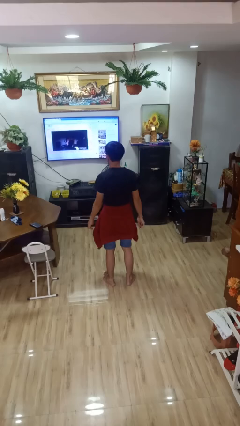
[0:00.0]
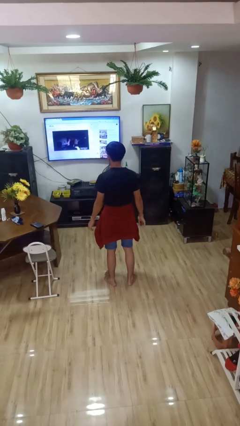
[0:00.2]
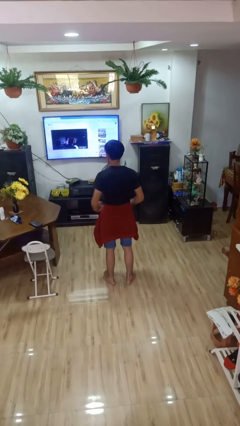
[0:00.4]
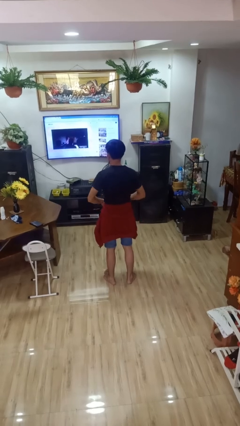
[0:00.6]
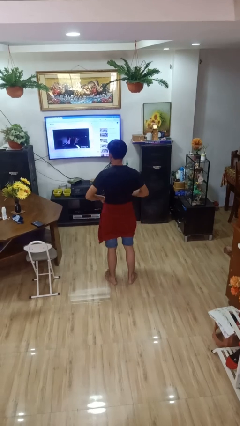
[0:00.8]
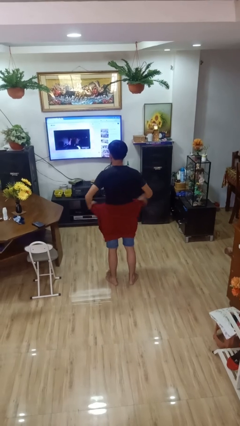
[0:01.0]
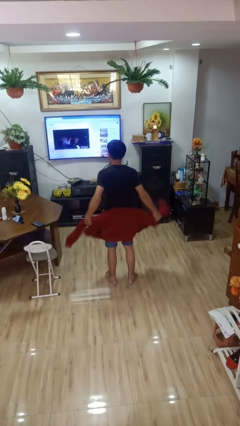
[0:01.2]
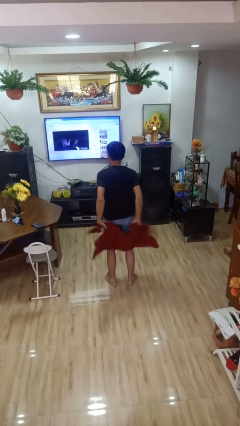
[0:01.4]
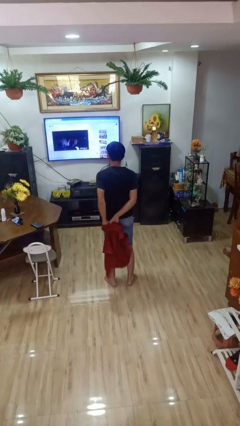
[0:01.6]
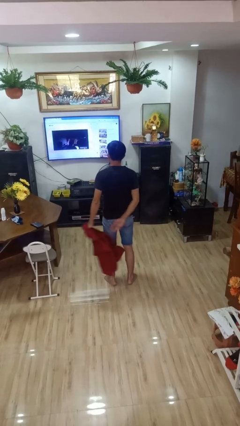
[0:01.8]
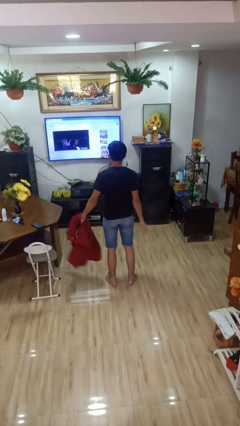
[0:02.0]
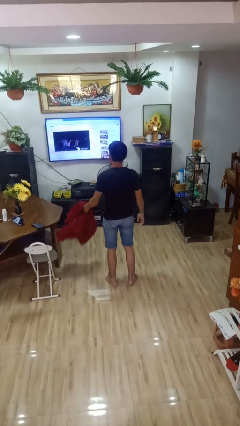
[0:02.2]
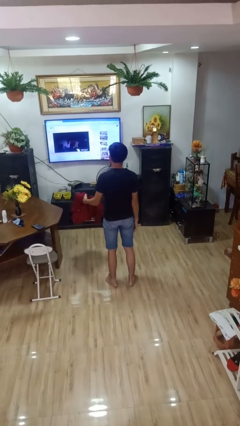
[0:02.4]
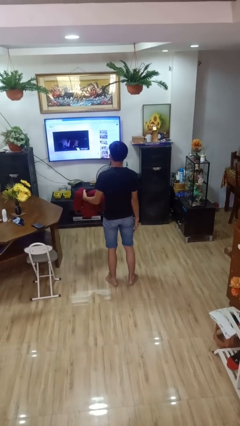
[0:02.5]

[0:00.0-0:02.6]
person unties jacket around waist

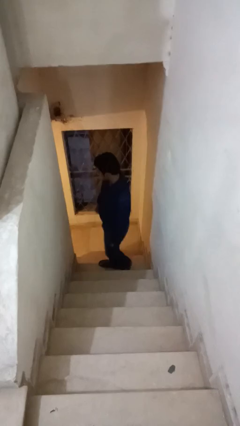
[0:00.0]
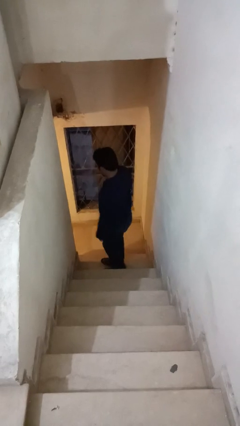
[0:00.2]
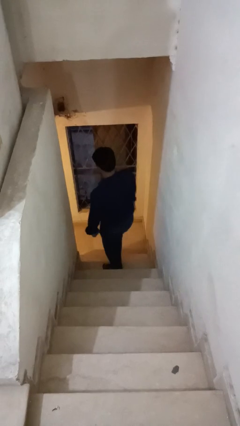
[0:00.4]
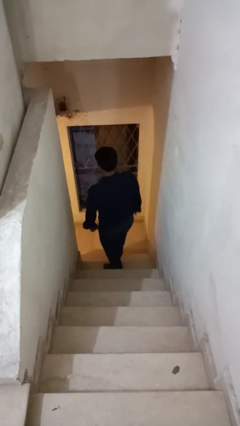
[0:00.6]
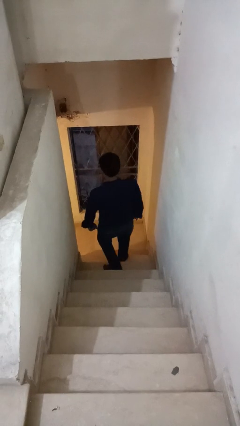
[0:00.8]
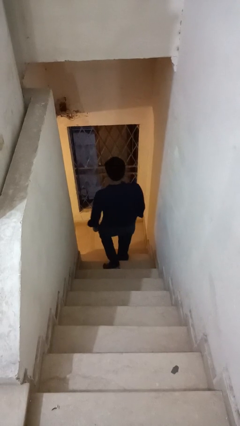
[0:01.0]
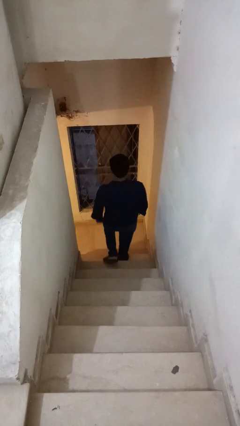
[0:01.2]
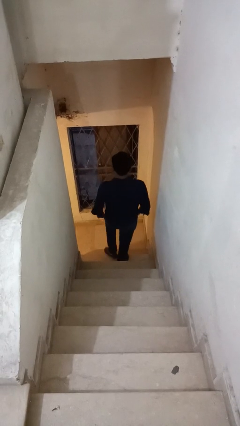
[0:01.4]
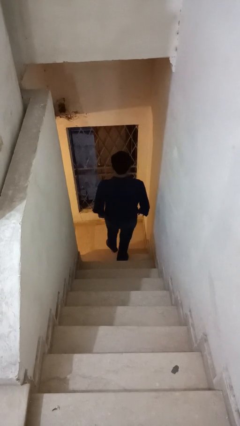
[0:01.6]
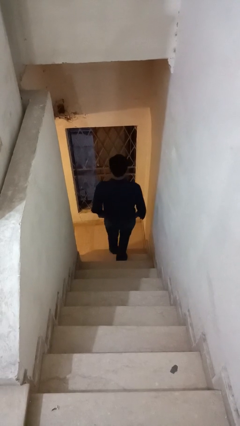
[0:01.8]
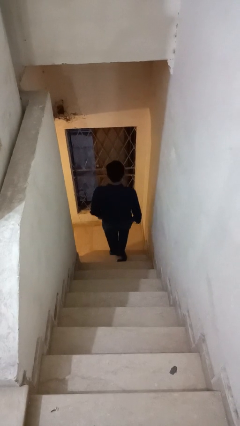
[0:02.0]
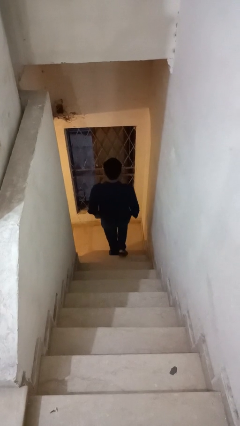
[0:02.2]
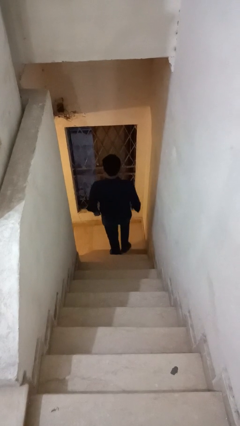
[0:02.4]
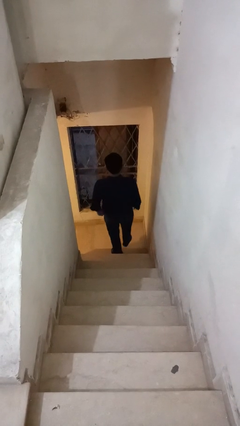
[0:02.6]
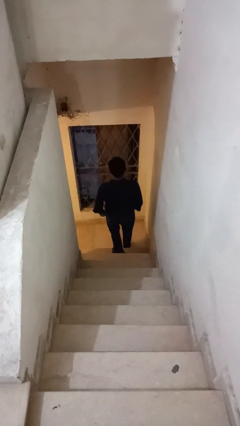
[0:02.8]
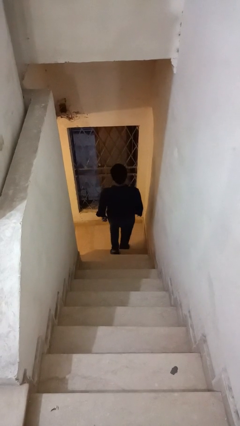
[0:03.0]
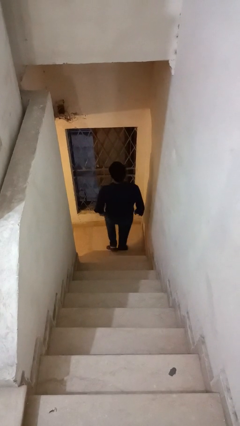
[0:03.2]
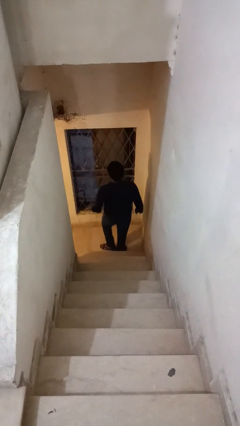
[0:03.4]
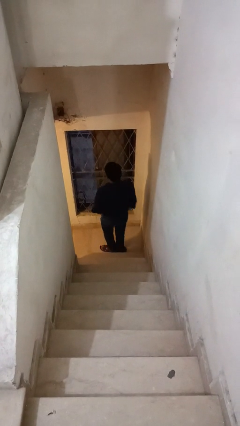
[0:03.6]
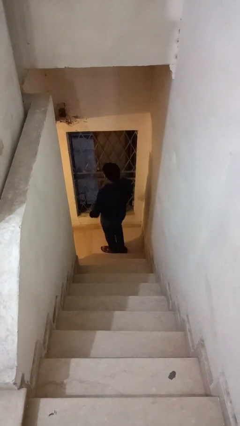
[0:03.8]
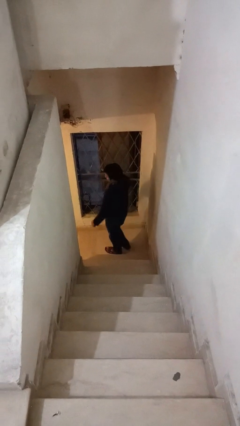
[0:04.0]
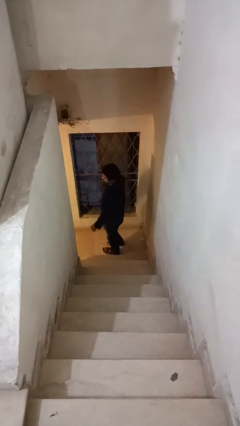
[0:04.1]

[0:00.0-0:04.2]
person climbs down stairs

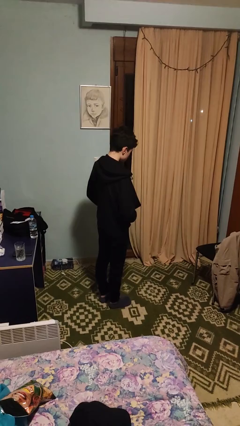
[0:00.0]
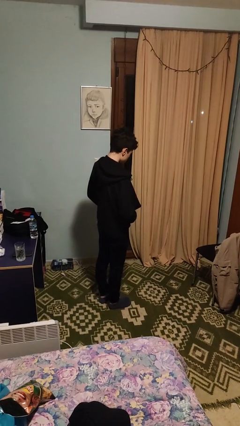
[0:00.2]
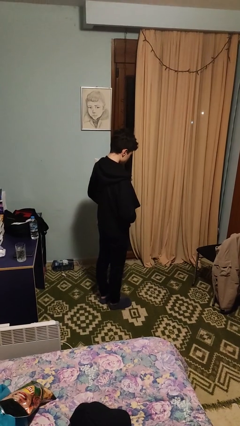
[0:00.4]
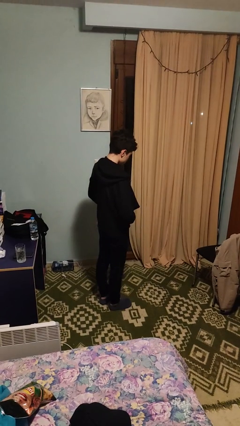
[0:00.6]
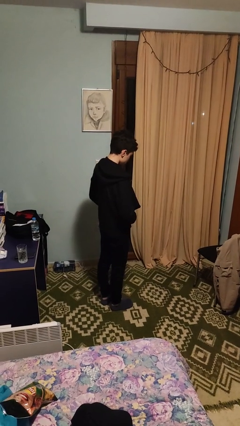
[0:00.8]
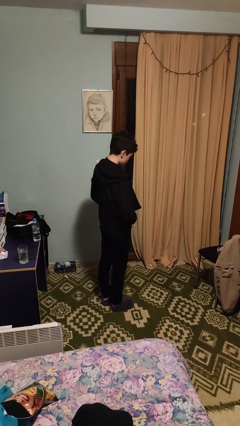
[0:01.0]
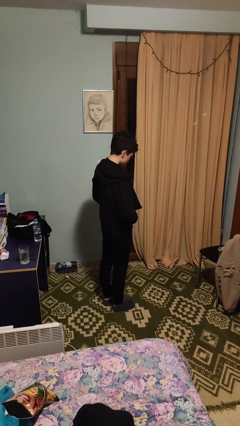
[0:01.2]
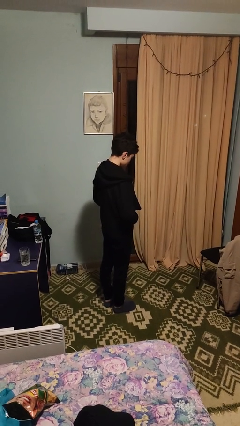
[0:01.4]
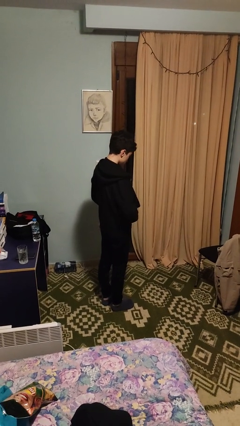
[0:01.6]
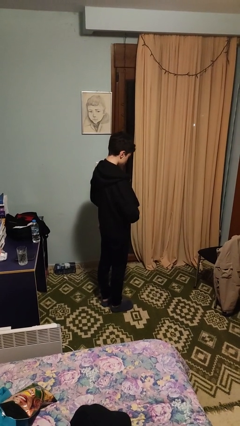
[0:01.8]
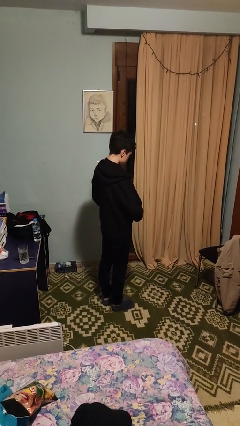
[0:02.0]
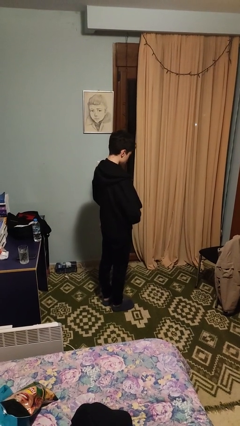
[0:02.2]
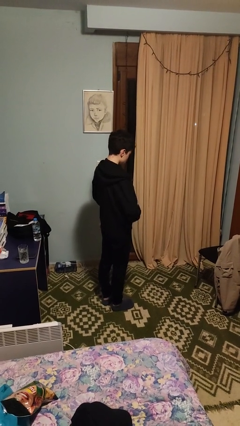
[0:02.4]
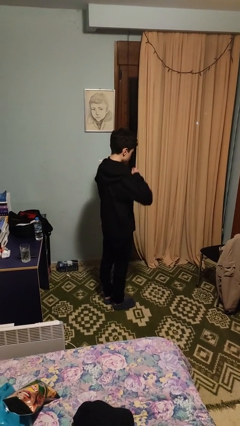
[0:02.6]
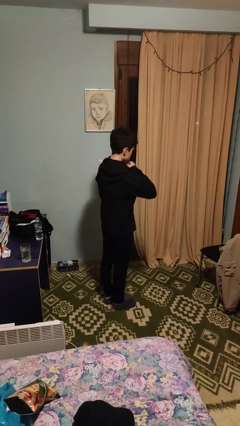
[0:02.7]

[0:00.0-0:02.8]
person zips up jacket

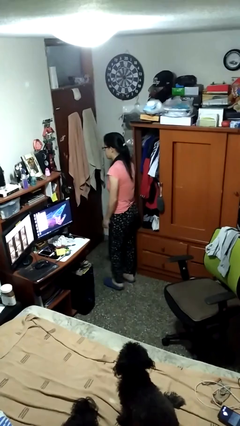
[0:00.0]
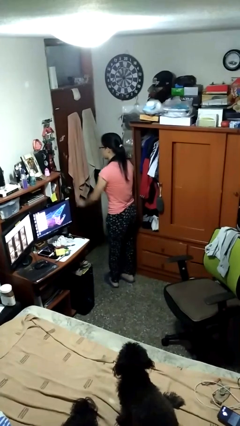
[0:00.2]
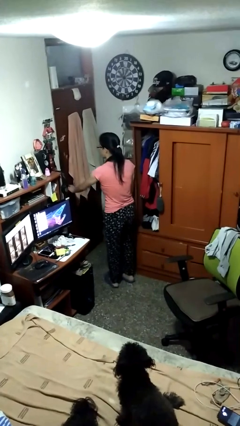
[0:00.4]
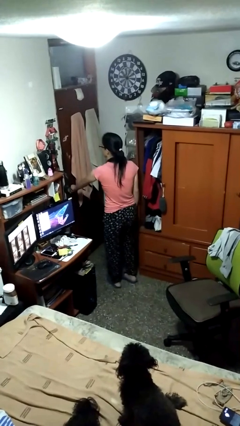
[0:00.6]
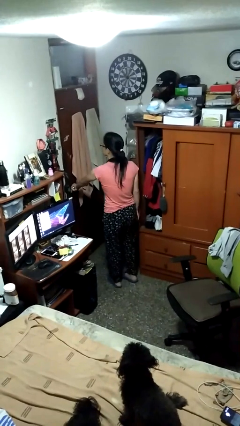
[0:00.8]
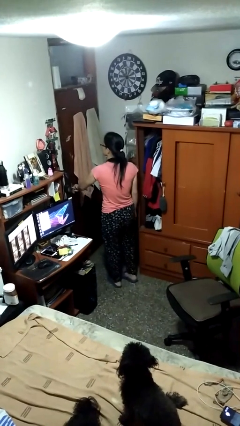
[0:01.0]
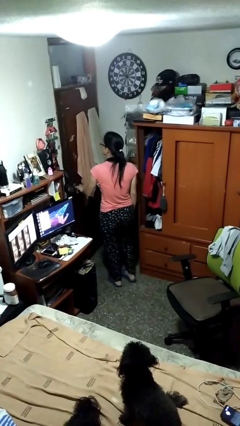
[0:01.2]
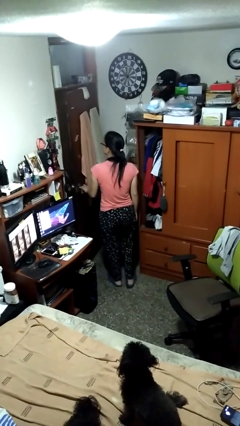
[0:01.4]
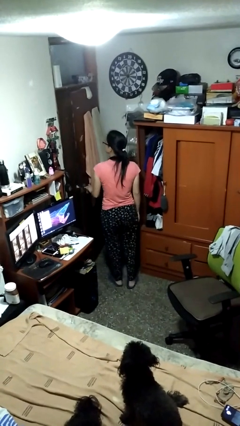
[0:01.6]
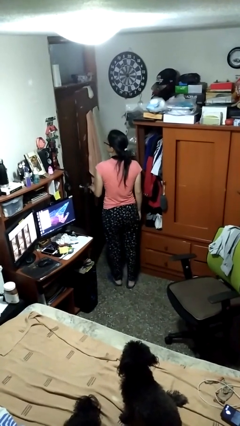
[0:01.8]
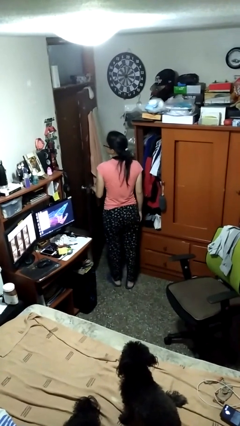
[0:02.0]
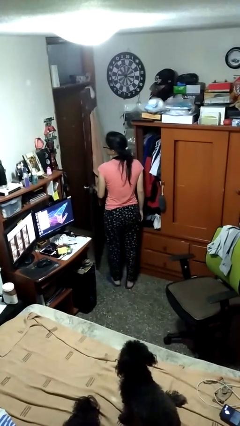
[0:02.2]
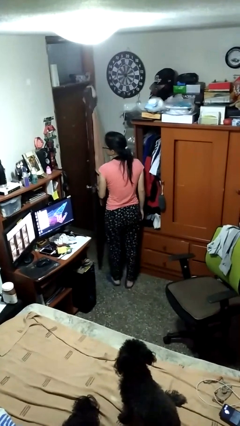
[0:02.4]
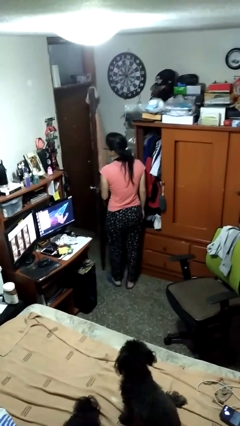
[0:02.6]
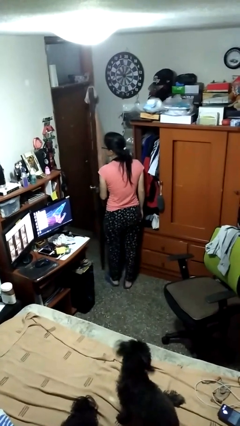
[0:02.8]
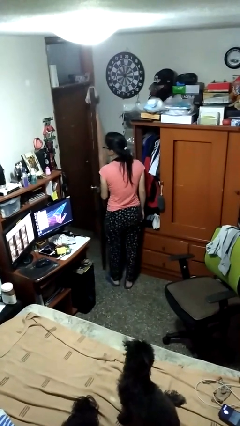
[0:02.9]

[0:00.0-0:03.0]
person opens facility door

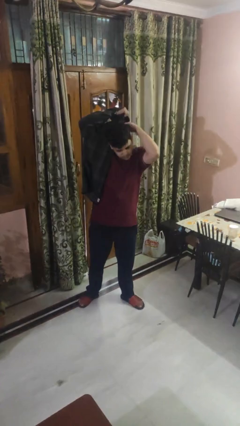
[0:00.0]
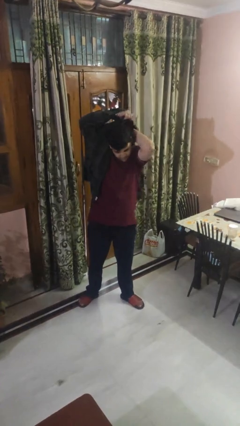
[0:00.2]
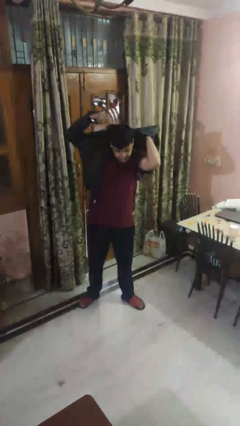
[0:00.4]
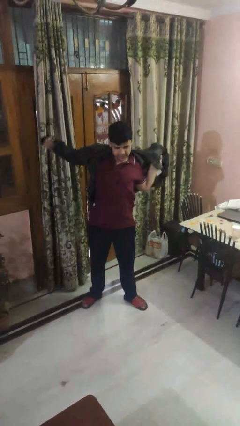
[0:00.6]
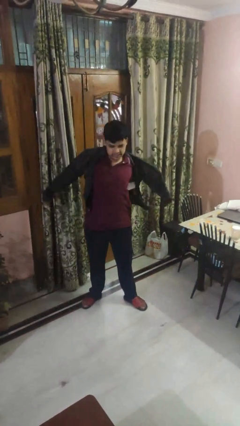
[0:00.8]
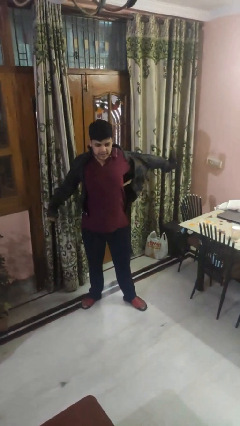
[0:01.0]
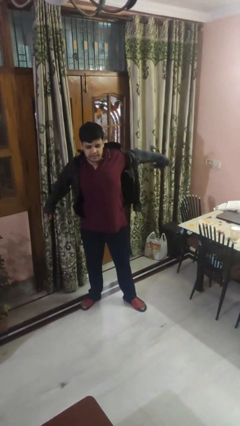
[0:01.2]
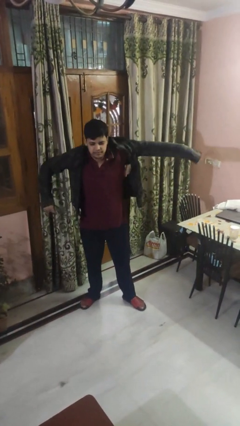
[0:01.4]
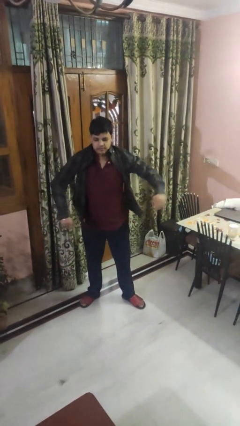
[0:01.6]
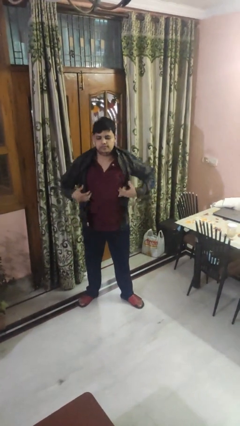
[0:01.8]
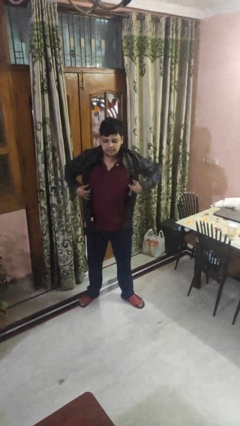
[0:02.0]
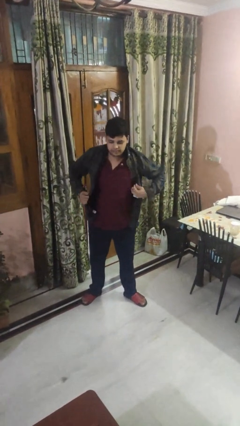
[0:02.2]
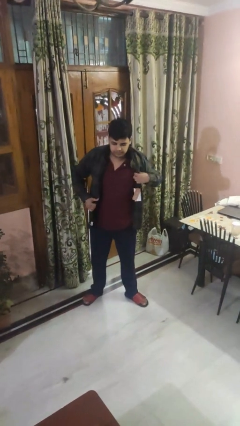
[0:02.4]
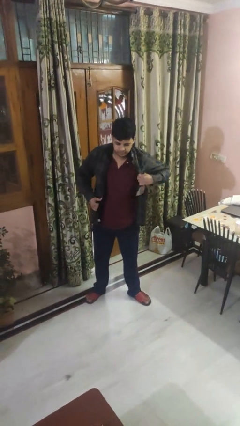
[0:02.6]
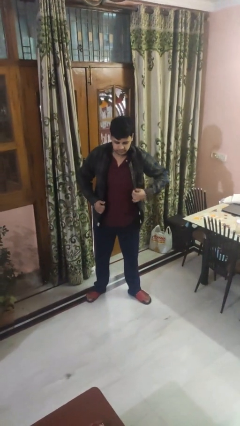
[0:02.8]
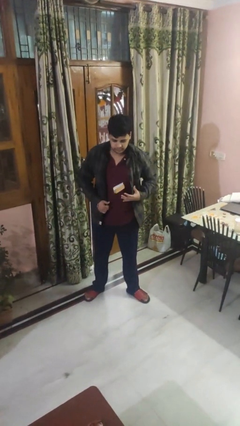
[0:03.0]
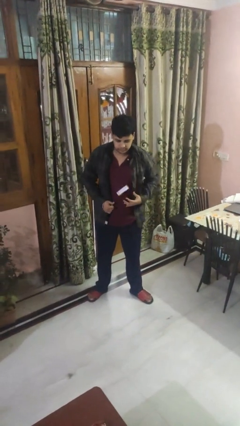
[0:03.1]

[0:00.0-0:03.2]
person puts on shirt

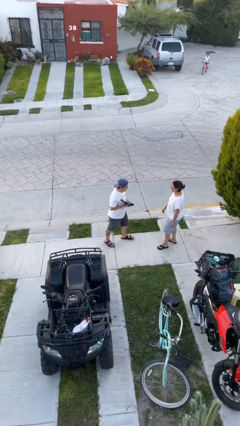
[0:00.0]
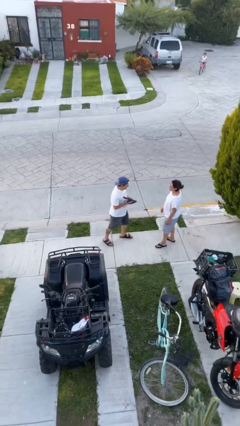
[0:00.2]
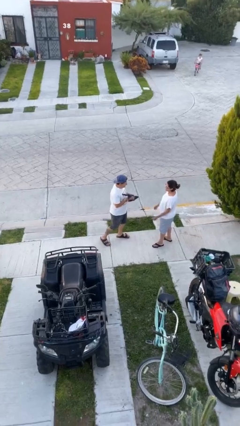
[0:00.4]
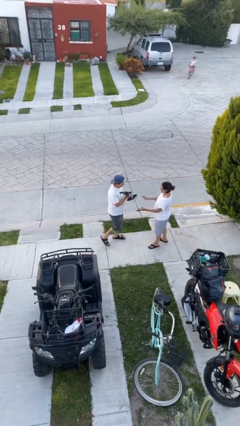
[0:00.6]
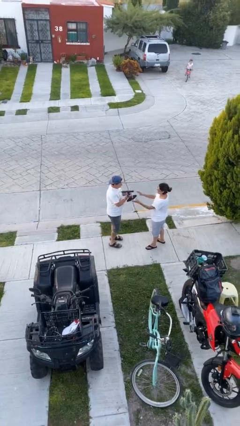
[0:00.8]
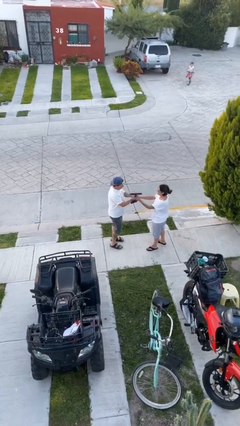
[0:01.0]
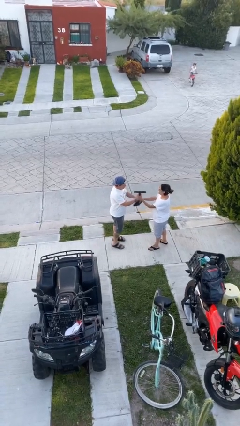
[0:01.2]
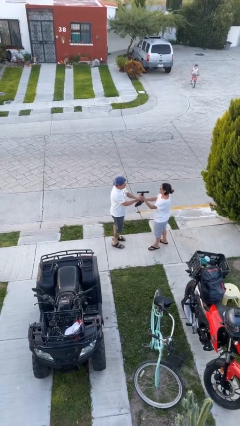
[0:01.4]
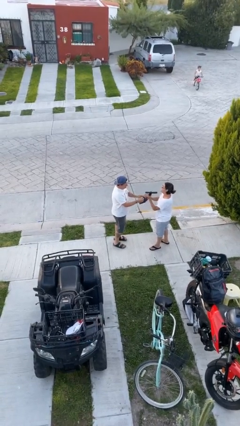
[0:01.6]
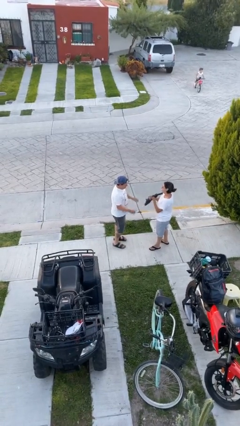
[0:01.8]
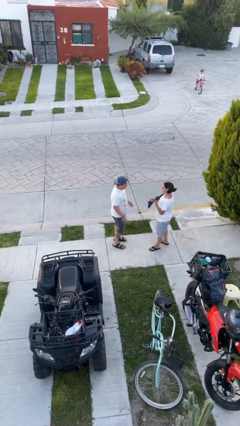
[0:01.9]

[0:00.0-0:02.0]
person transfers object to person
